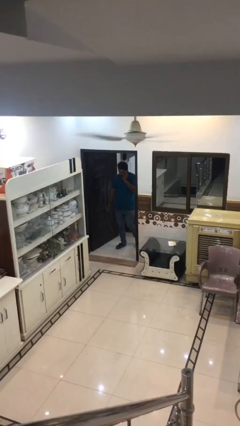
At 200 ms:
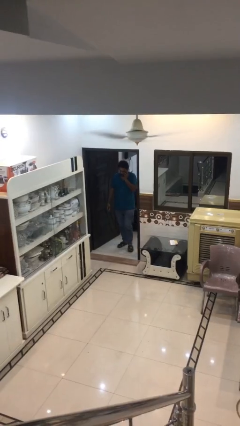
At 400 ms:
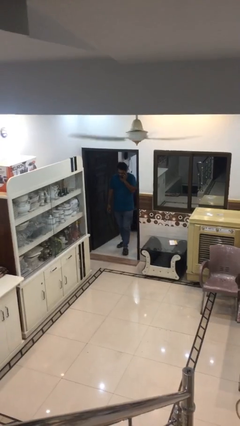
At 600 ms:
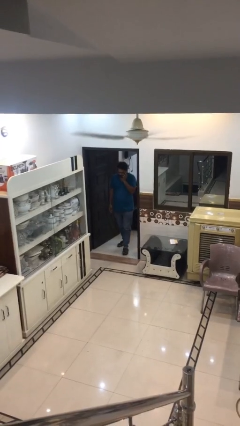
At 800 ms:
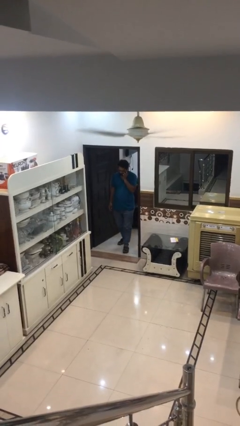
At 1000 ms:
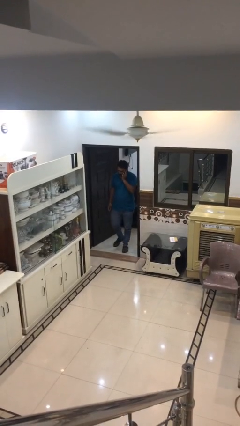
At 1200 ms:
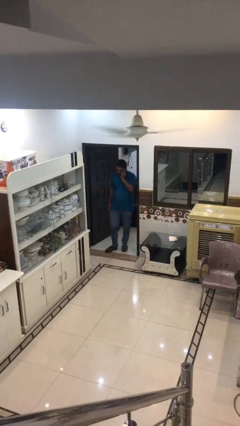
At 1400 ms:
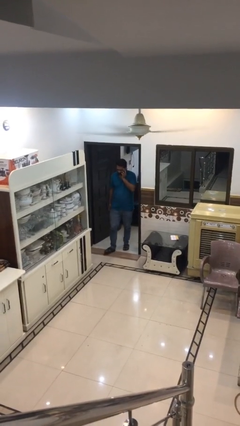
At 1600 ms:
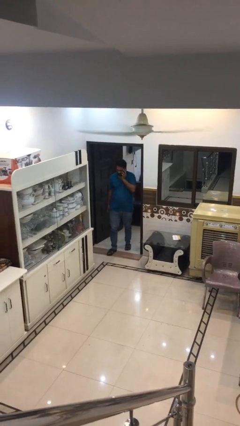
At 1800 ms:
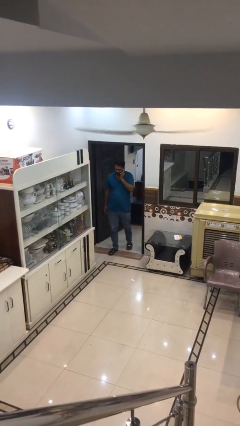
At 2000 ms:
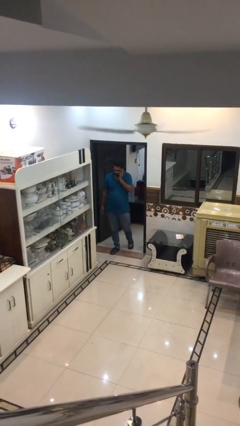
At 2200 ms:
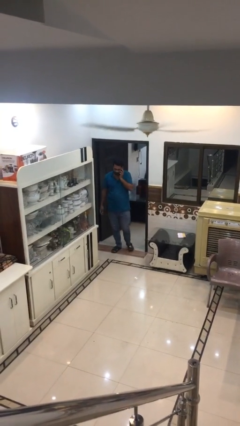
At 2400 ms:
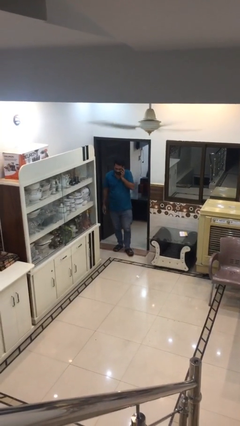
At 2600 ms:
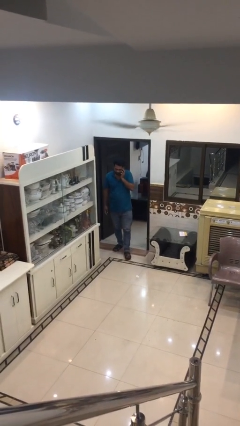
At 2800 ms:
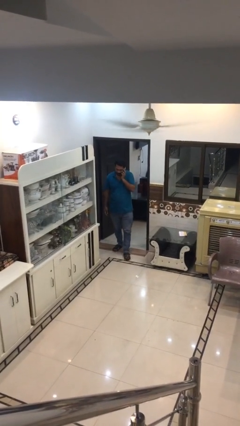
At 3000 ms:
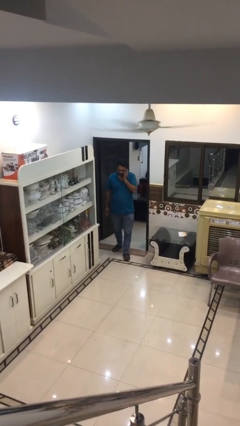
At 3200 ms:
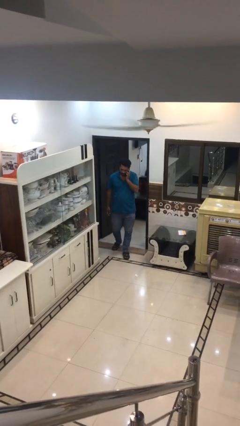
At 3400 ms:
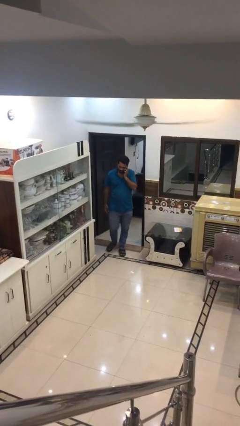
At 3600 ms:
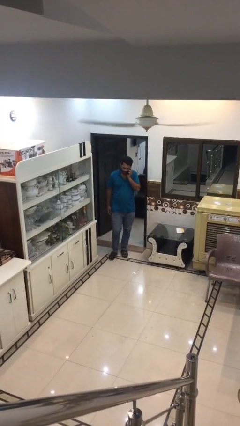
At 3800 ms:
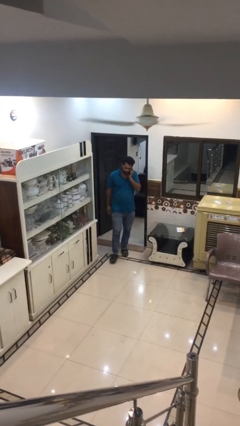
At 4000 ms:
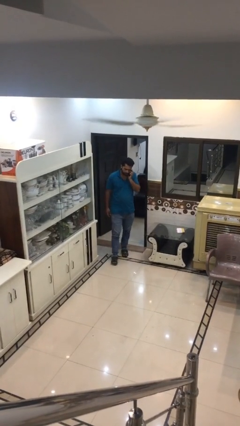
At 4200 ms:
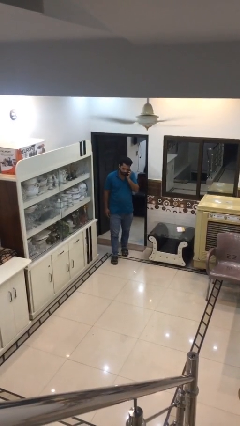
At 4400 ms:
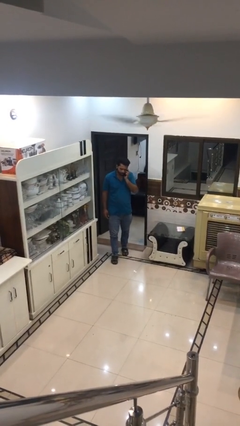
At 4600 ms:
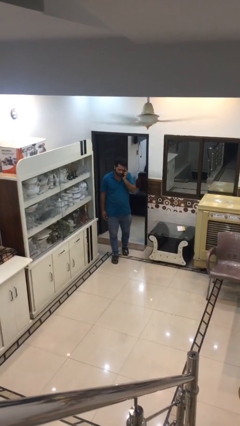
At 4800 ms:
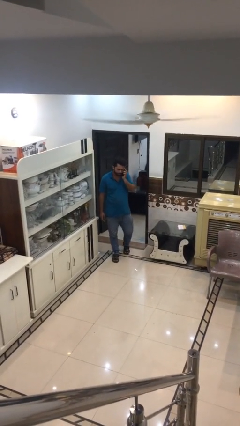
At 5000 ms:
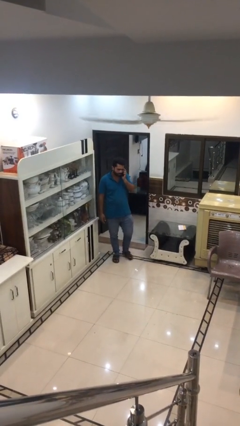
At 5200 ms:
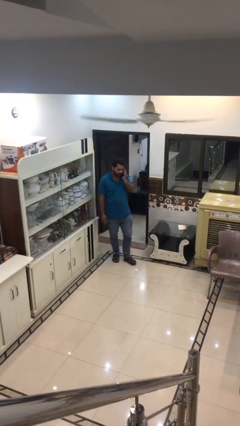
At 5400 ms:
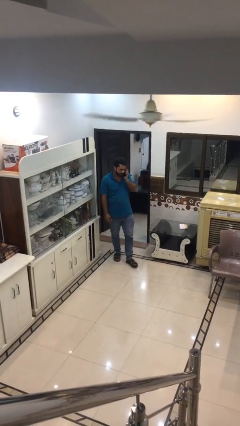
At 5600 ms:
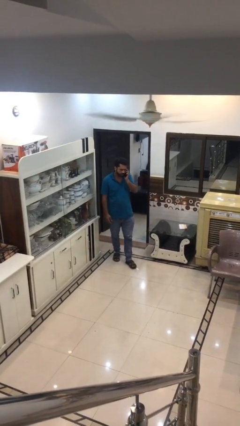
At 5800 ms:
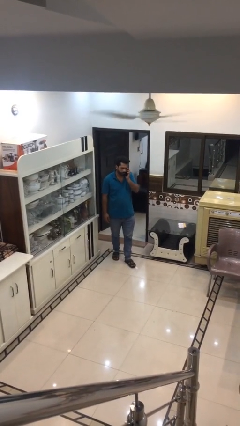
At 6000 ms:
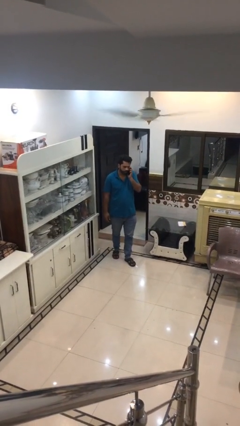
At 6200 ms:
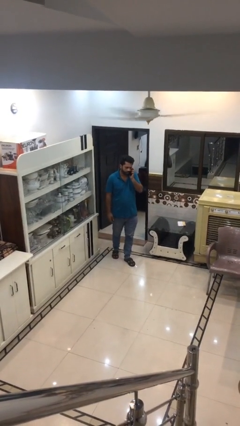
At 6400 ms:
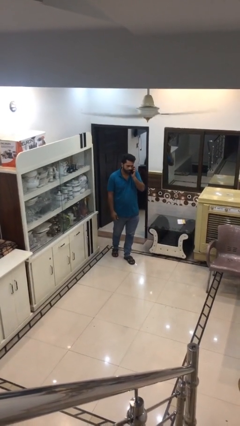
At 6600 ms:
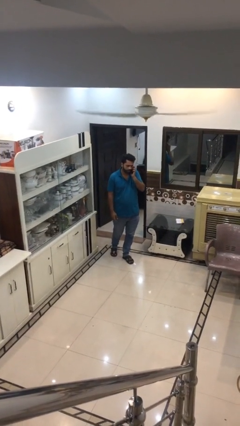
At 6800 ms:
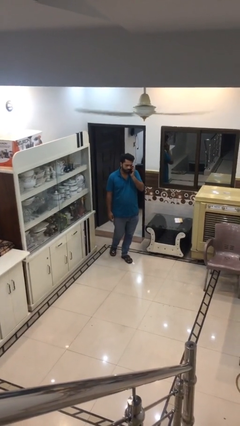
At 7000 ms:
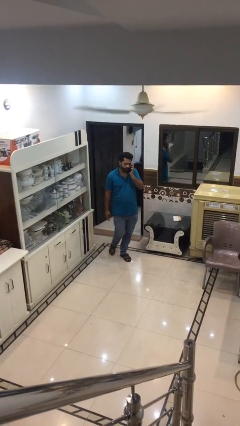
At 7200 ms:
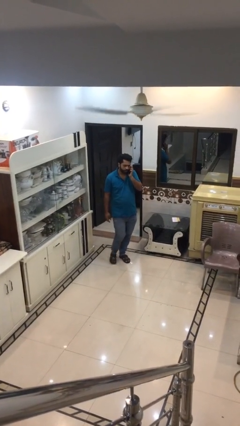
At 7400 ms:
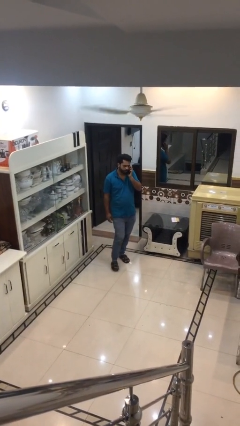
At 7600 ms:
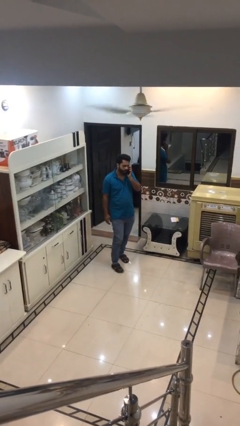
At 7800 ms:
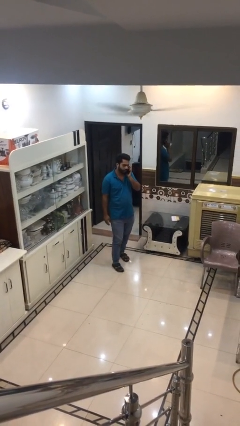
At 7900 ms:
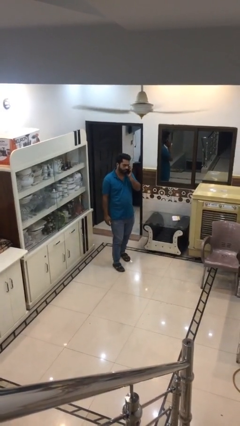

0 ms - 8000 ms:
person enters scene through structure

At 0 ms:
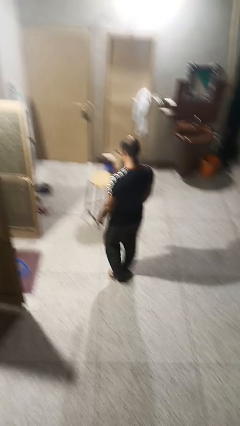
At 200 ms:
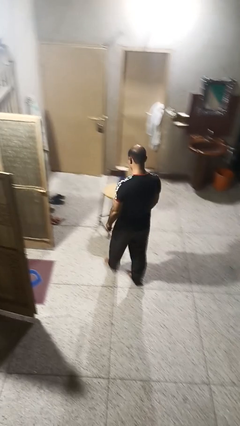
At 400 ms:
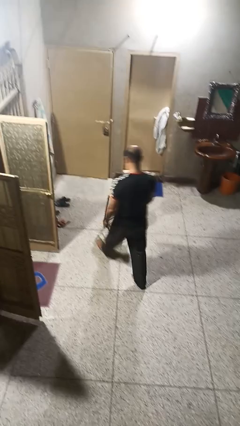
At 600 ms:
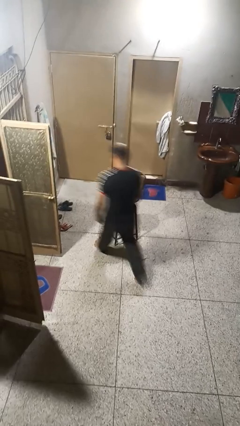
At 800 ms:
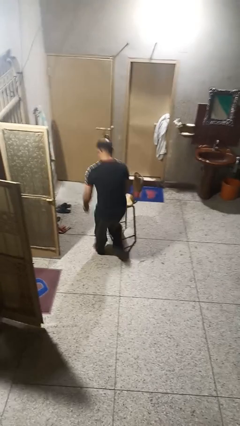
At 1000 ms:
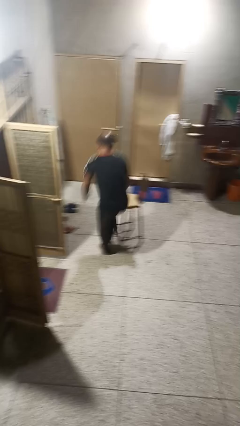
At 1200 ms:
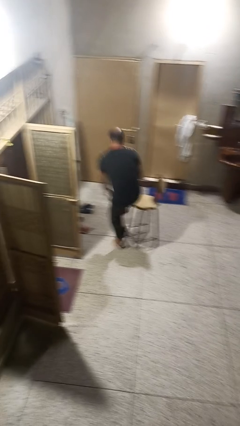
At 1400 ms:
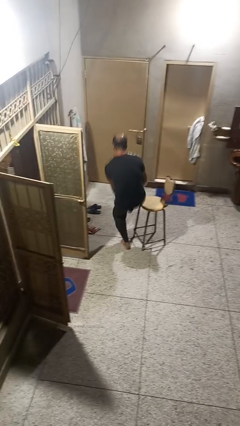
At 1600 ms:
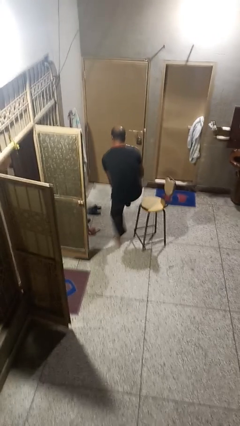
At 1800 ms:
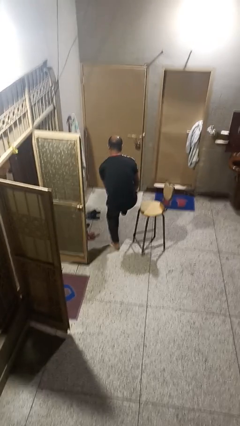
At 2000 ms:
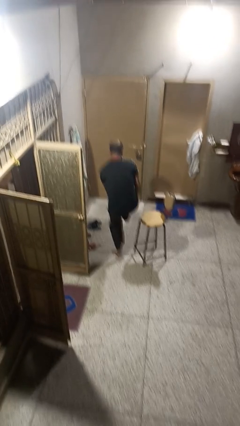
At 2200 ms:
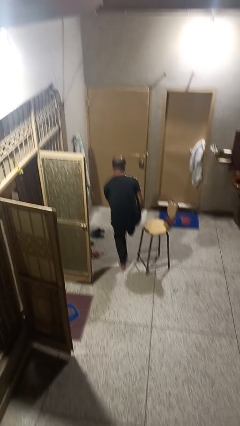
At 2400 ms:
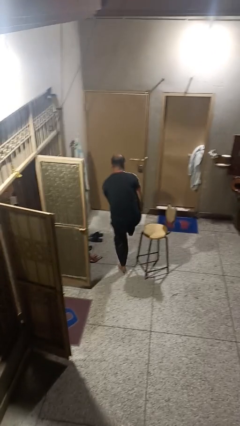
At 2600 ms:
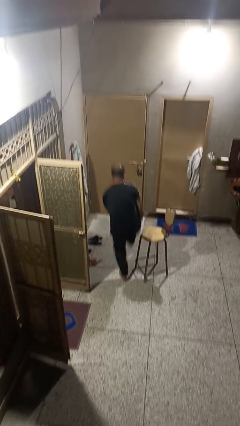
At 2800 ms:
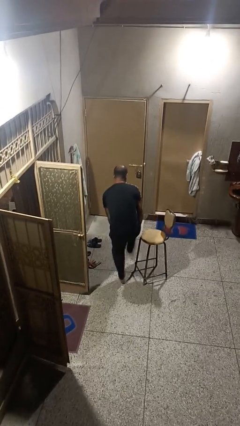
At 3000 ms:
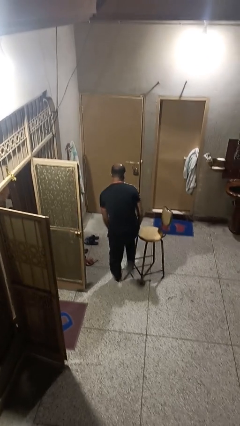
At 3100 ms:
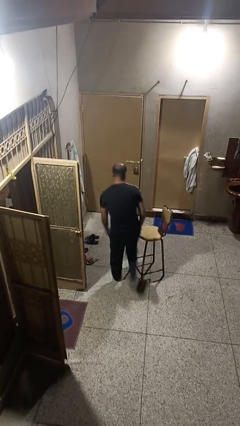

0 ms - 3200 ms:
person stubs toe

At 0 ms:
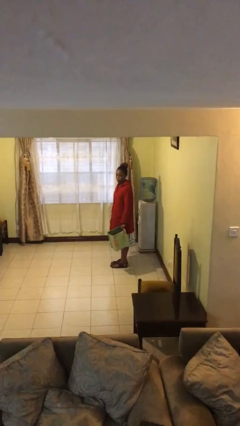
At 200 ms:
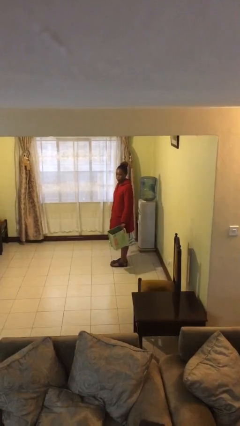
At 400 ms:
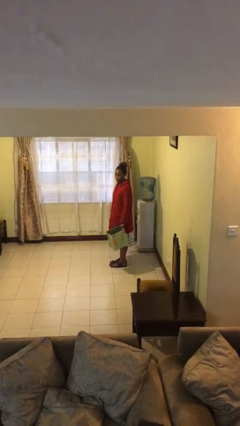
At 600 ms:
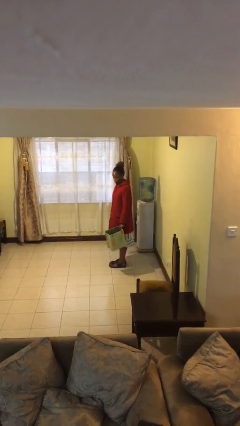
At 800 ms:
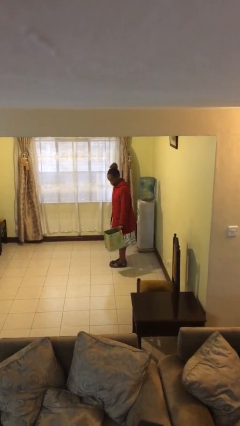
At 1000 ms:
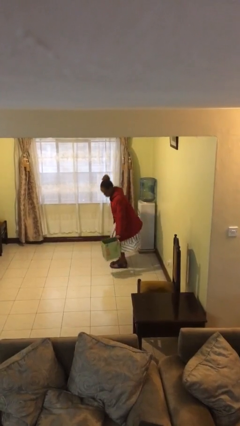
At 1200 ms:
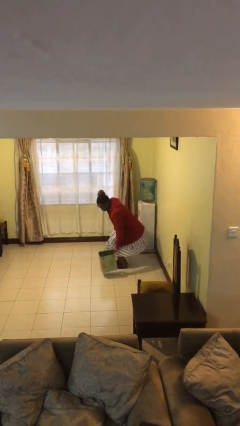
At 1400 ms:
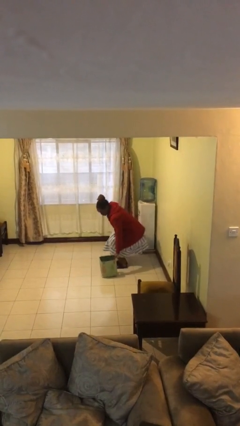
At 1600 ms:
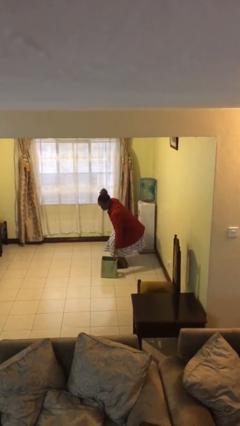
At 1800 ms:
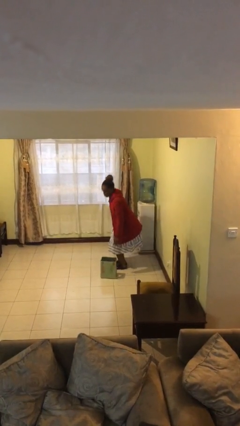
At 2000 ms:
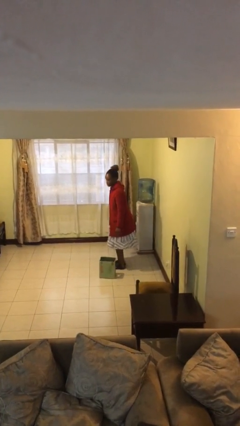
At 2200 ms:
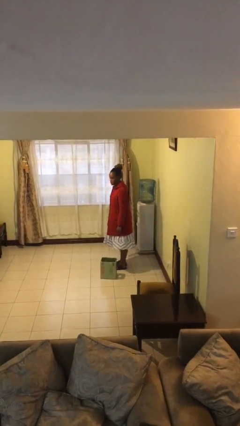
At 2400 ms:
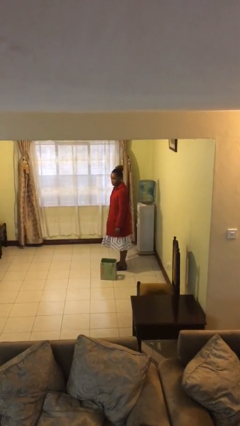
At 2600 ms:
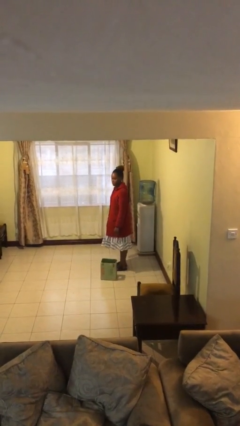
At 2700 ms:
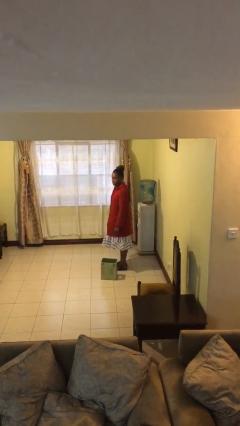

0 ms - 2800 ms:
person puts down object on floor

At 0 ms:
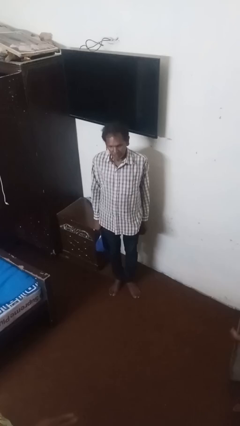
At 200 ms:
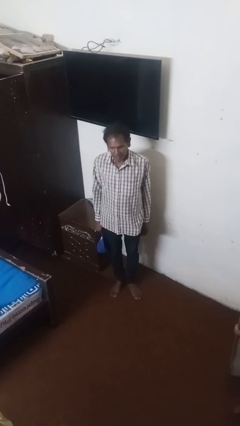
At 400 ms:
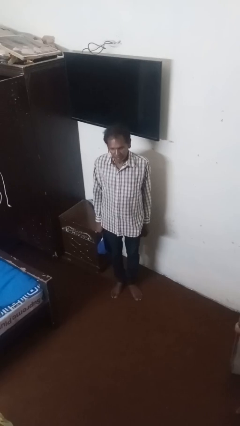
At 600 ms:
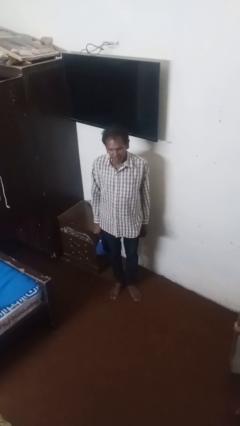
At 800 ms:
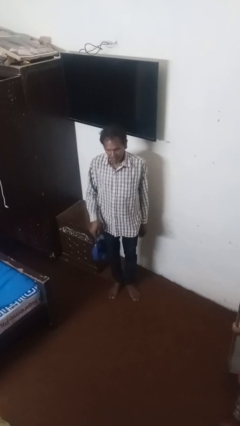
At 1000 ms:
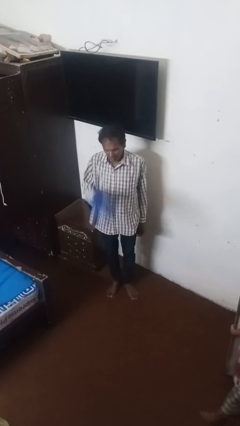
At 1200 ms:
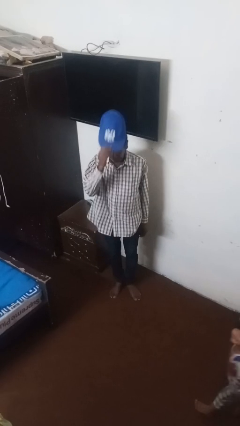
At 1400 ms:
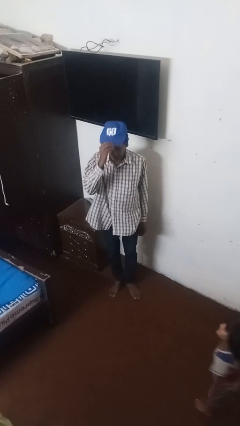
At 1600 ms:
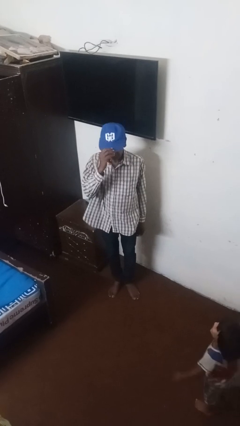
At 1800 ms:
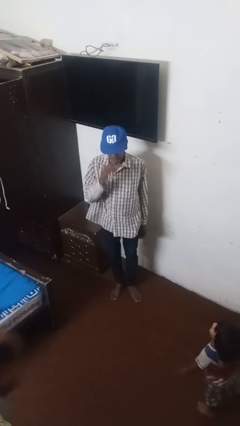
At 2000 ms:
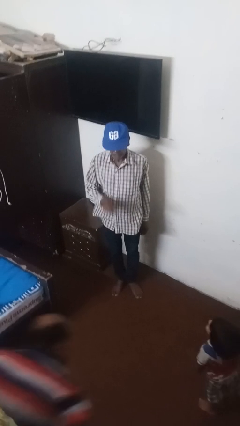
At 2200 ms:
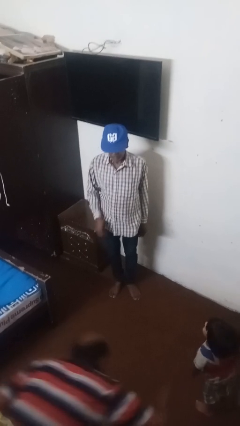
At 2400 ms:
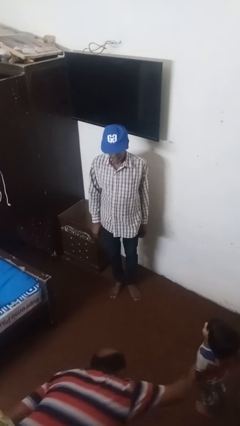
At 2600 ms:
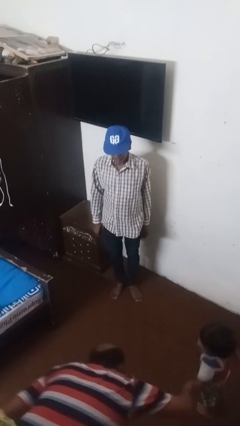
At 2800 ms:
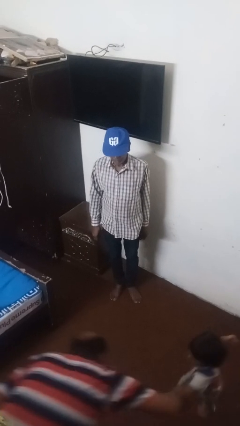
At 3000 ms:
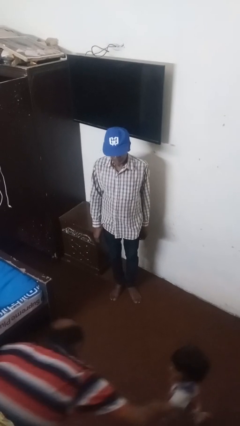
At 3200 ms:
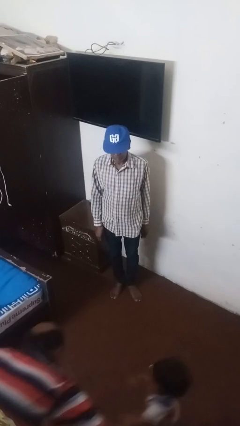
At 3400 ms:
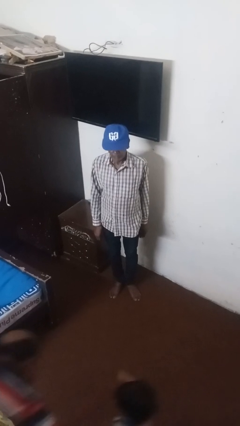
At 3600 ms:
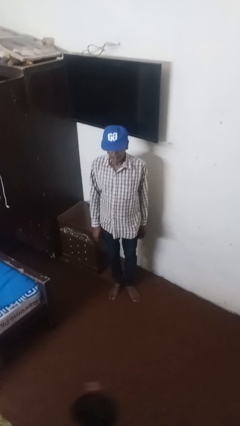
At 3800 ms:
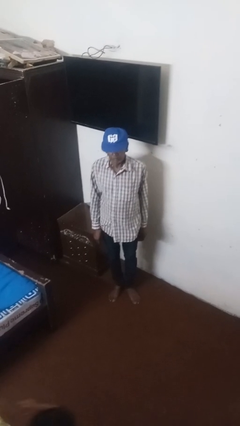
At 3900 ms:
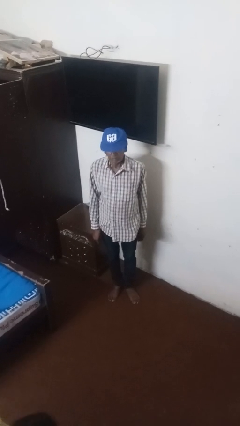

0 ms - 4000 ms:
person puts on hat
